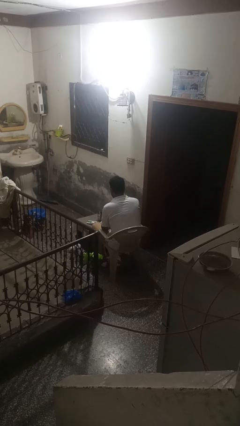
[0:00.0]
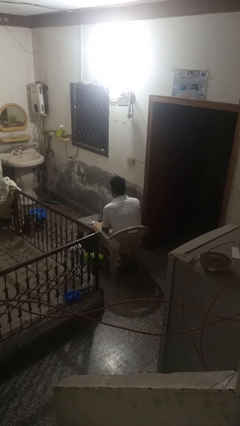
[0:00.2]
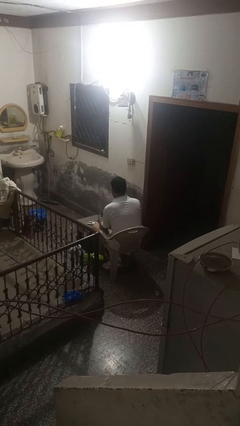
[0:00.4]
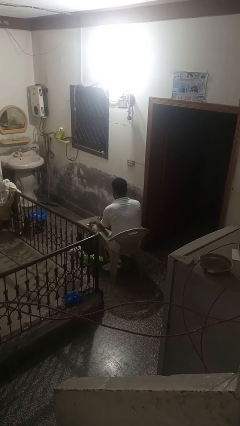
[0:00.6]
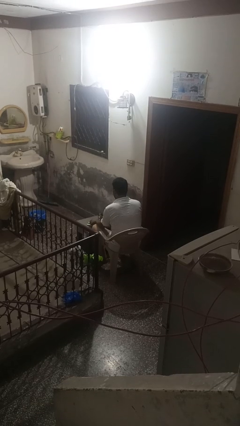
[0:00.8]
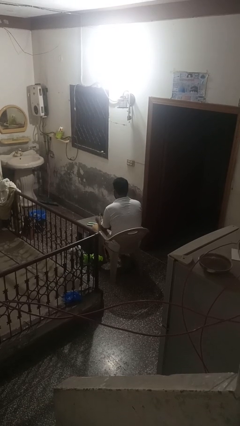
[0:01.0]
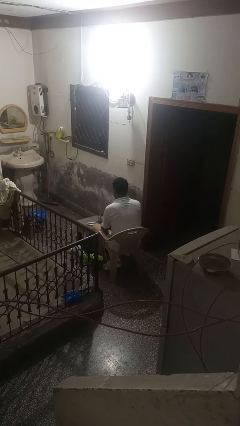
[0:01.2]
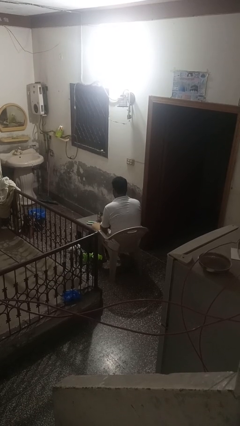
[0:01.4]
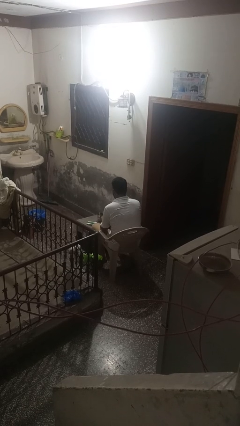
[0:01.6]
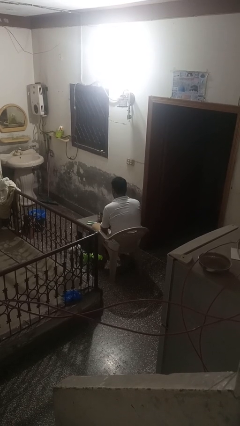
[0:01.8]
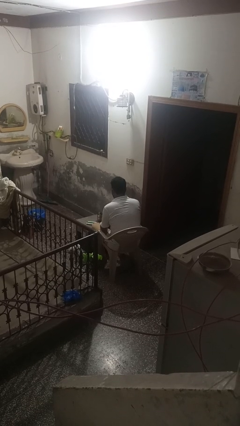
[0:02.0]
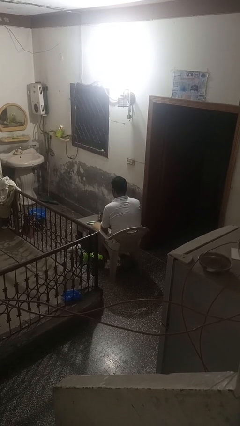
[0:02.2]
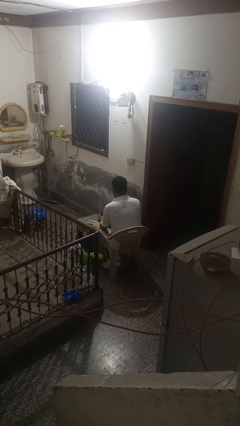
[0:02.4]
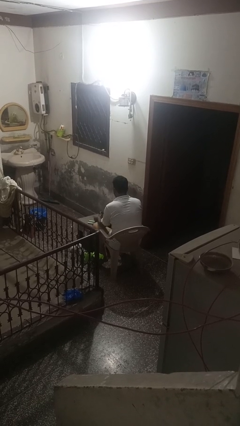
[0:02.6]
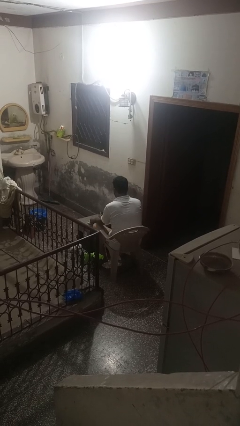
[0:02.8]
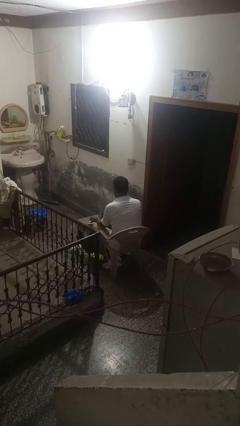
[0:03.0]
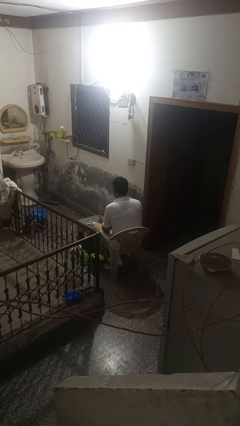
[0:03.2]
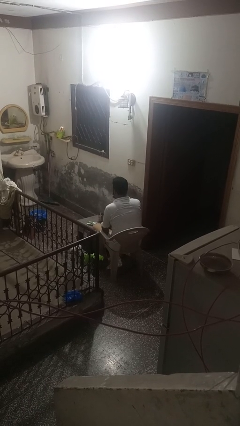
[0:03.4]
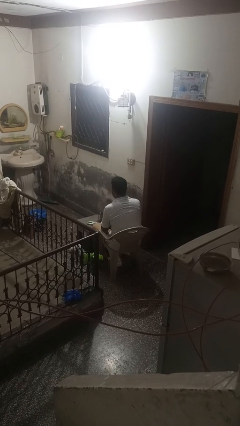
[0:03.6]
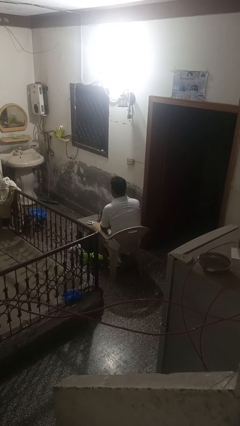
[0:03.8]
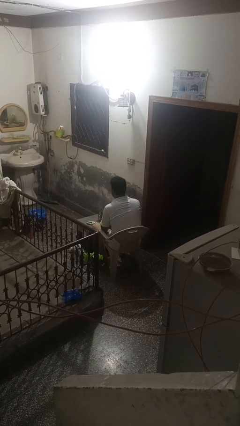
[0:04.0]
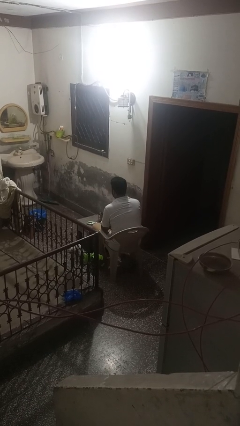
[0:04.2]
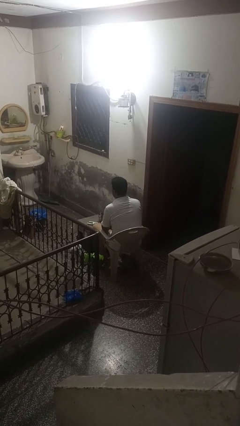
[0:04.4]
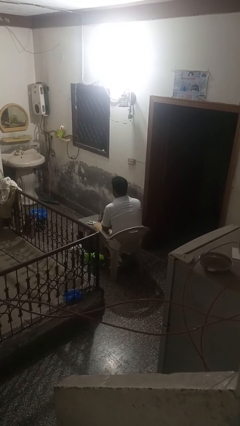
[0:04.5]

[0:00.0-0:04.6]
person takes medicine pills

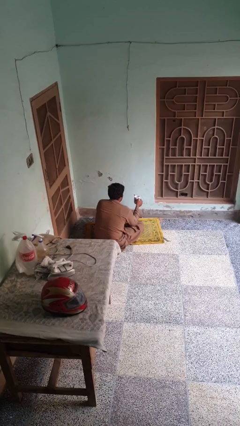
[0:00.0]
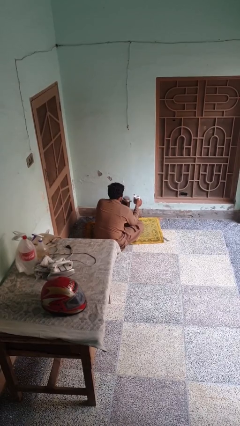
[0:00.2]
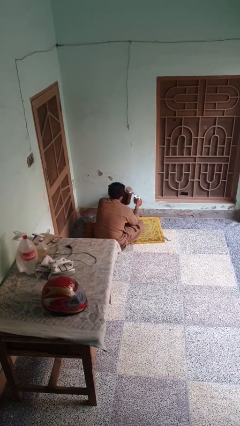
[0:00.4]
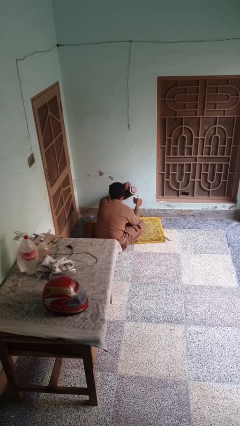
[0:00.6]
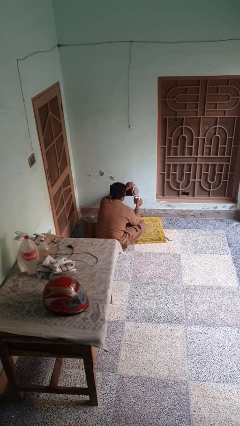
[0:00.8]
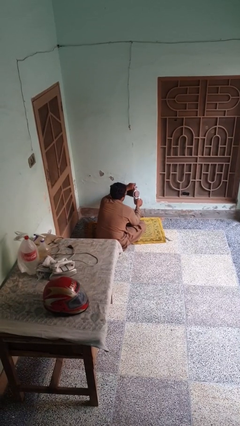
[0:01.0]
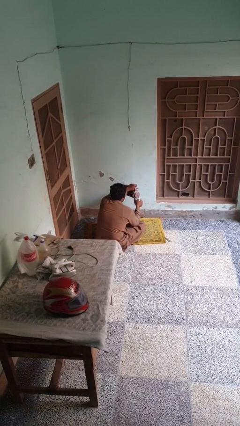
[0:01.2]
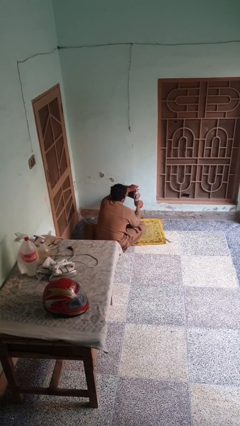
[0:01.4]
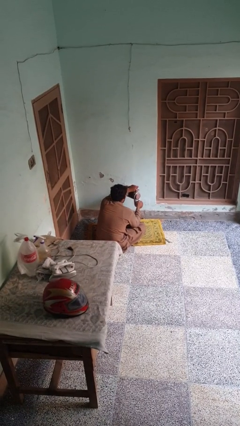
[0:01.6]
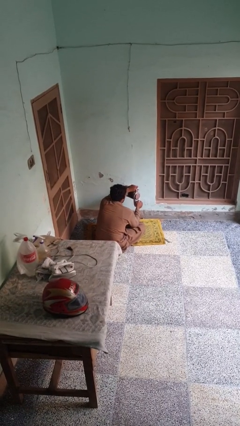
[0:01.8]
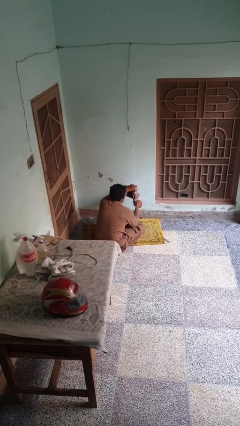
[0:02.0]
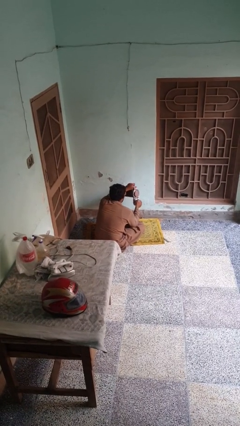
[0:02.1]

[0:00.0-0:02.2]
person pours coffee into mug

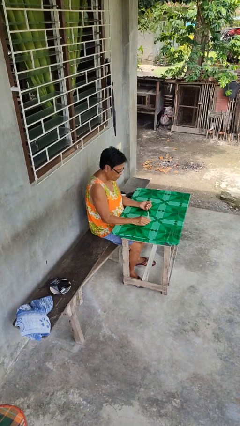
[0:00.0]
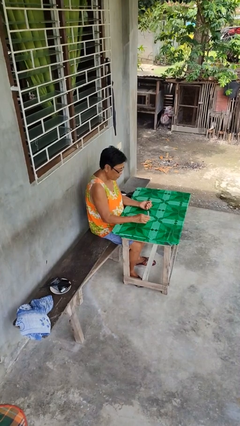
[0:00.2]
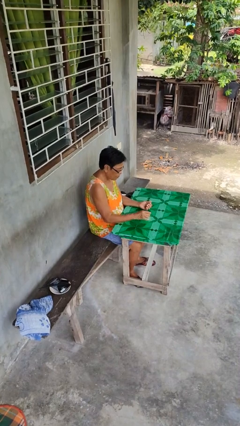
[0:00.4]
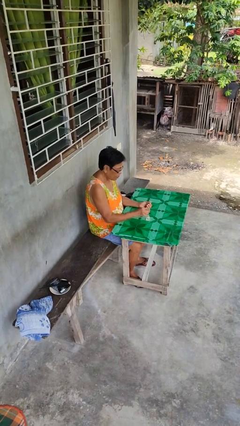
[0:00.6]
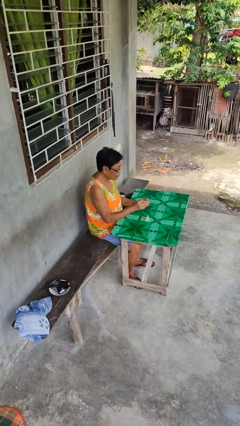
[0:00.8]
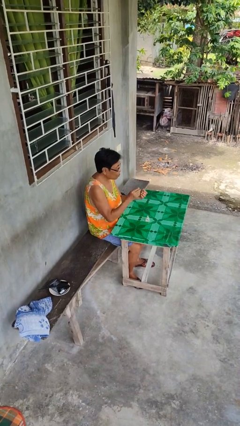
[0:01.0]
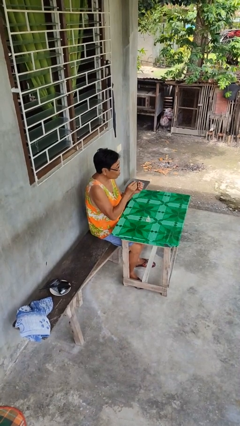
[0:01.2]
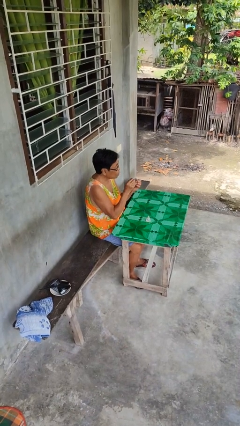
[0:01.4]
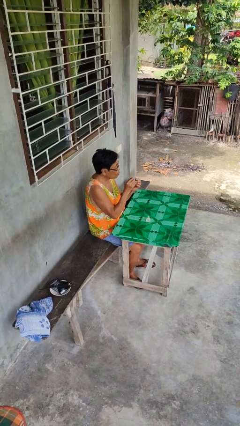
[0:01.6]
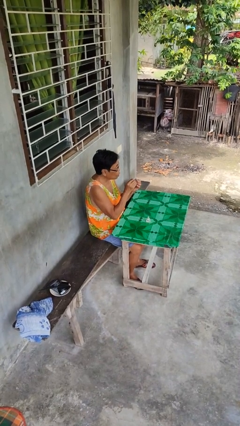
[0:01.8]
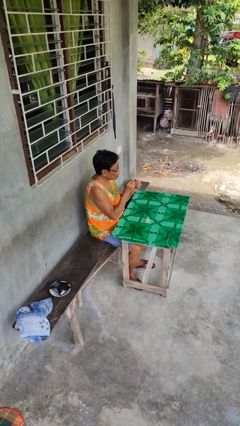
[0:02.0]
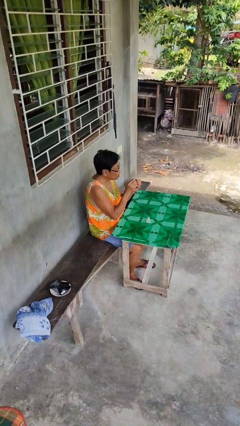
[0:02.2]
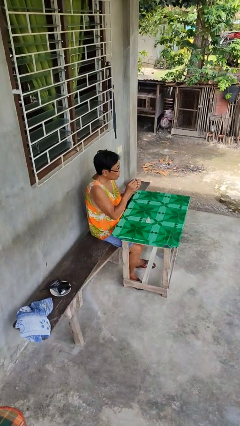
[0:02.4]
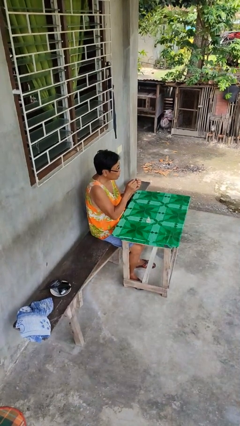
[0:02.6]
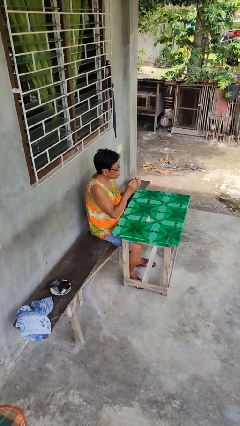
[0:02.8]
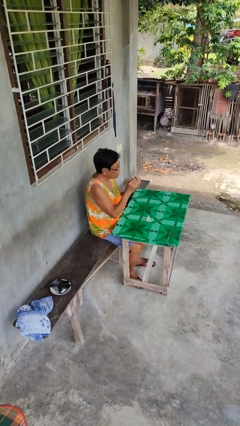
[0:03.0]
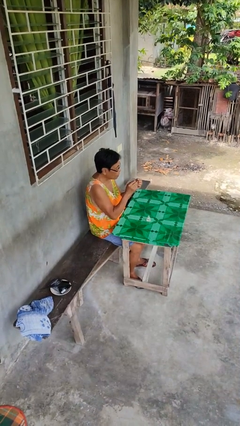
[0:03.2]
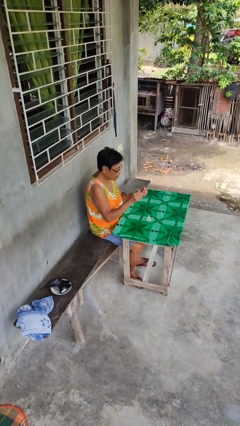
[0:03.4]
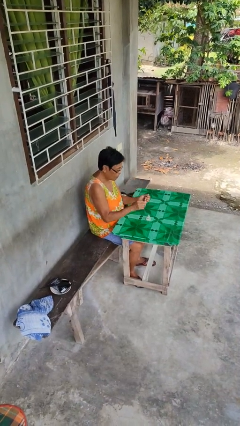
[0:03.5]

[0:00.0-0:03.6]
person paints fingernails

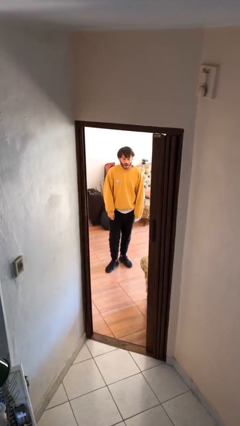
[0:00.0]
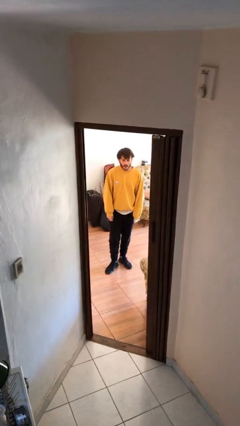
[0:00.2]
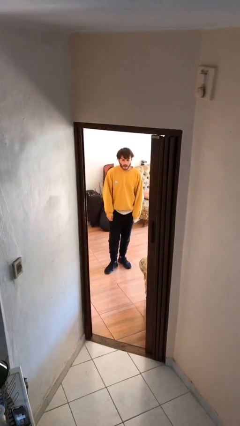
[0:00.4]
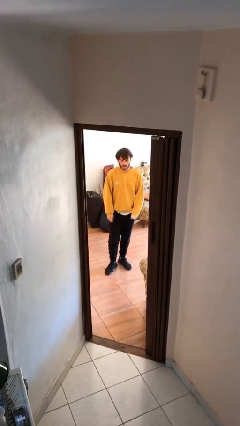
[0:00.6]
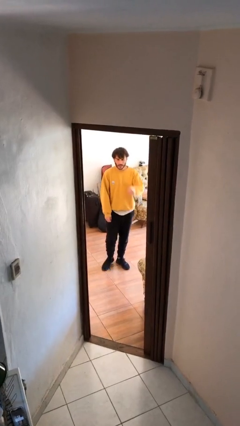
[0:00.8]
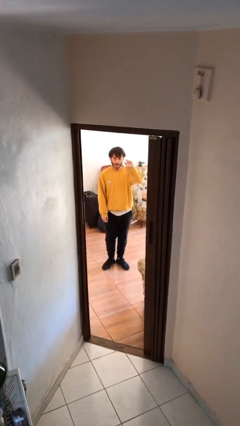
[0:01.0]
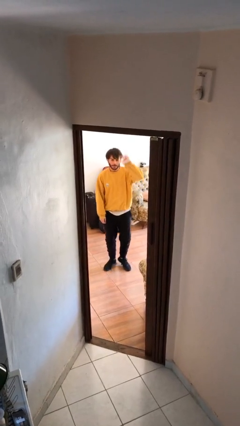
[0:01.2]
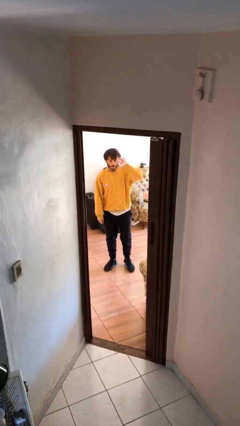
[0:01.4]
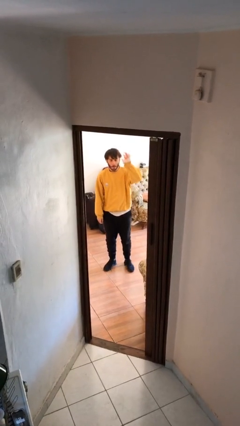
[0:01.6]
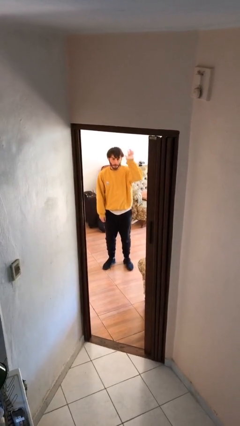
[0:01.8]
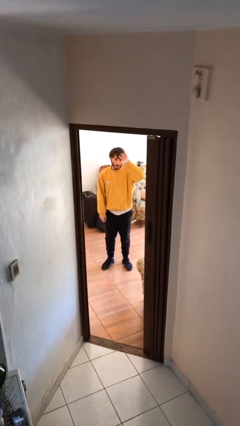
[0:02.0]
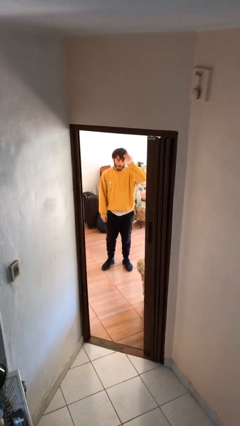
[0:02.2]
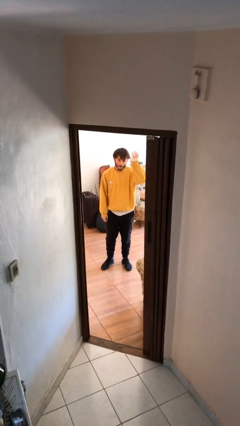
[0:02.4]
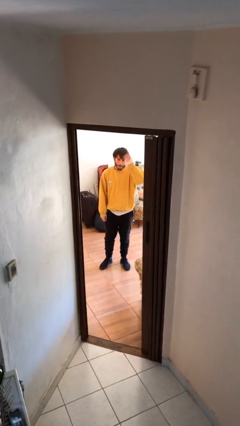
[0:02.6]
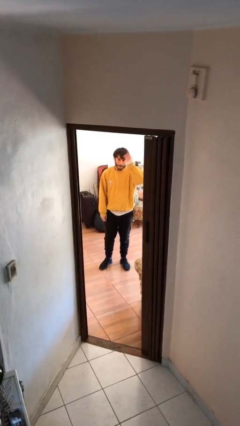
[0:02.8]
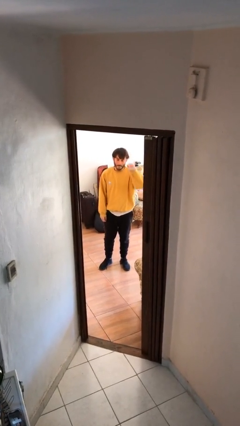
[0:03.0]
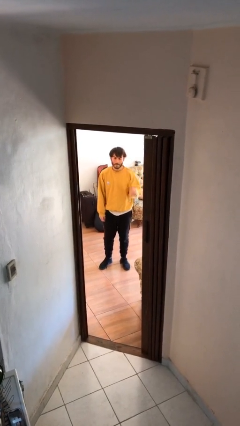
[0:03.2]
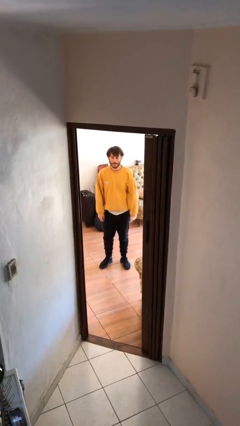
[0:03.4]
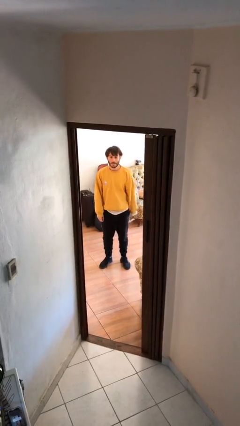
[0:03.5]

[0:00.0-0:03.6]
person waves at person

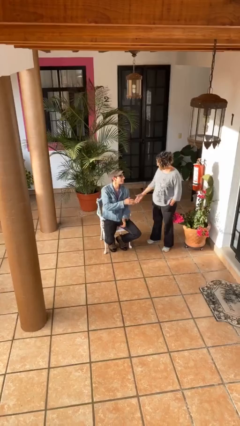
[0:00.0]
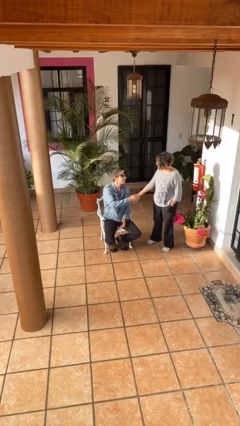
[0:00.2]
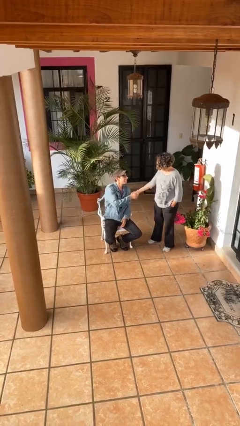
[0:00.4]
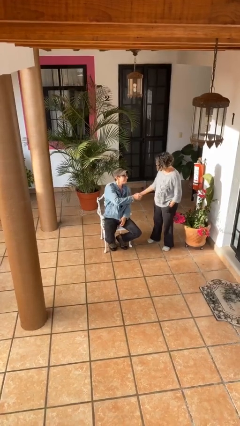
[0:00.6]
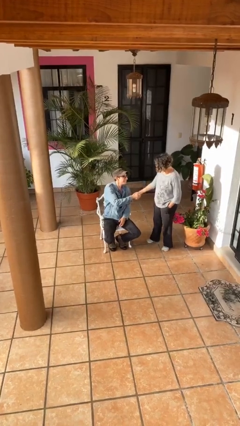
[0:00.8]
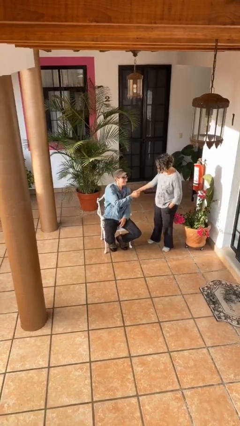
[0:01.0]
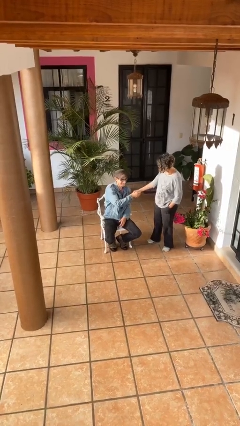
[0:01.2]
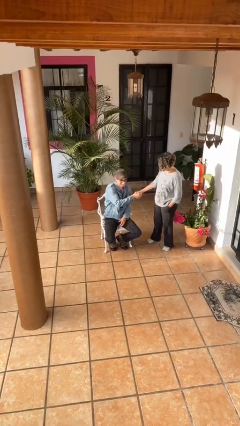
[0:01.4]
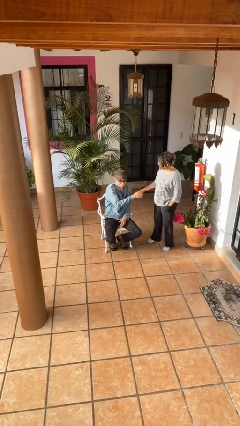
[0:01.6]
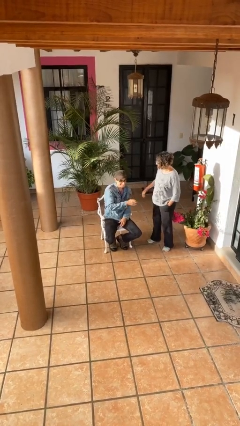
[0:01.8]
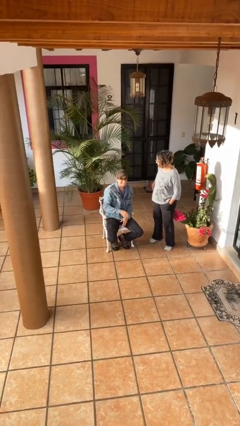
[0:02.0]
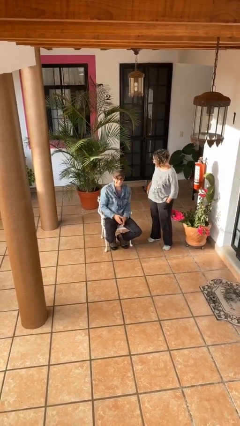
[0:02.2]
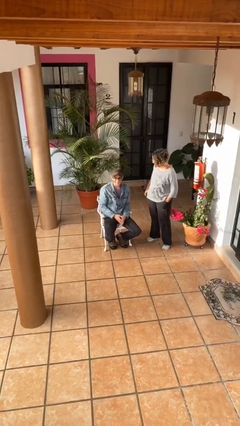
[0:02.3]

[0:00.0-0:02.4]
person shakes hand

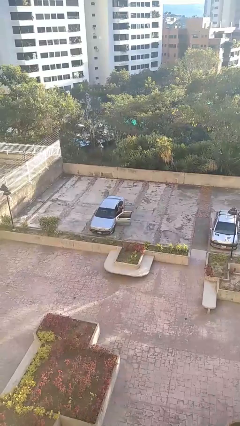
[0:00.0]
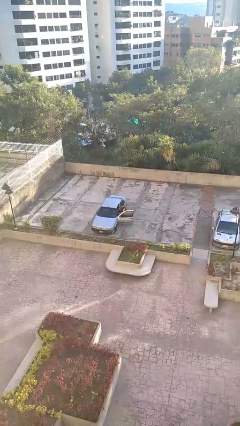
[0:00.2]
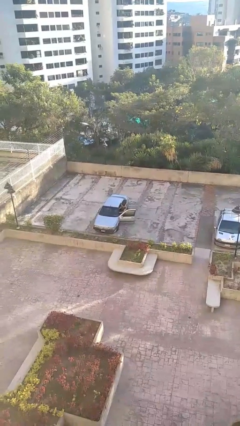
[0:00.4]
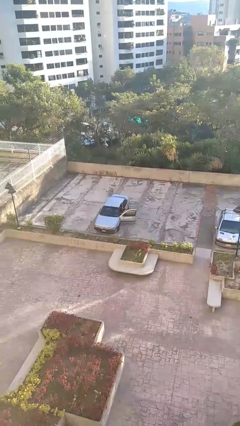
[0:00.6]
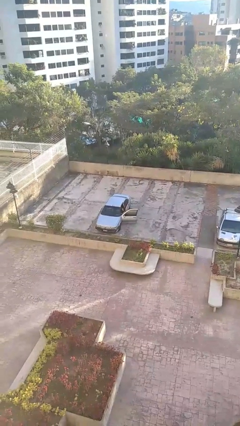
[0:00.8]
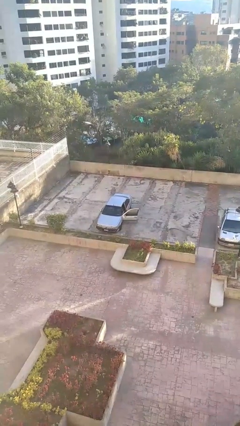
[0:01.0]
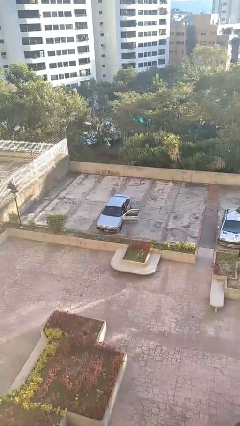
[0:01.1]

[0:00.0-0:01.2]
person enters car

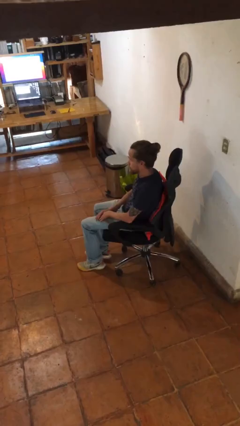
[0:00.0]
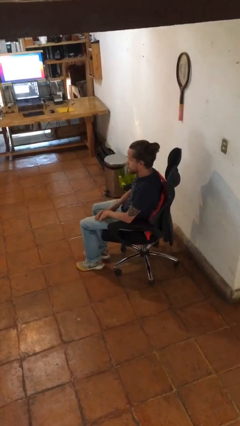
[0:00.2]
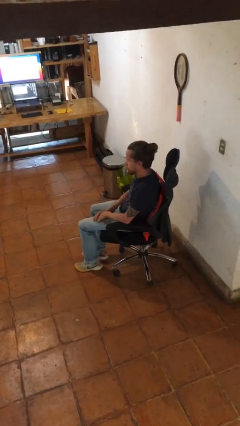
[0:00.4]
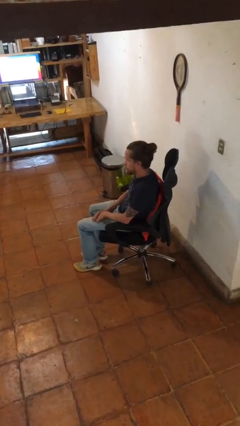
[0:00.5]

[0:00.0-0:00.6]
person looks at hands in lap
